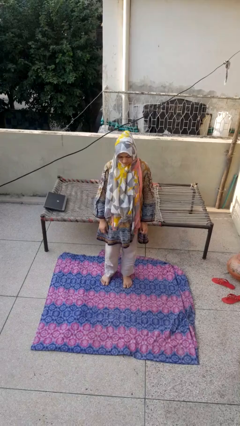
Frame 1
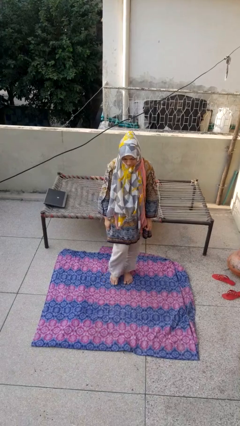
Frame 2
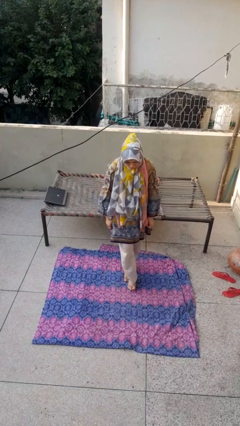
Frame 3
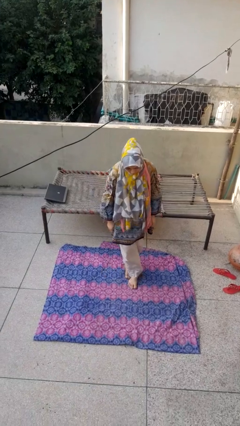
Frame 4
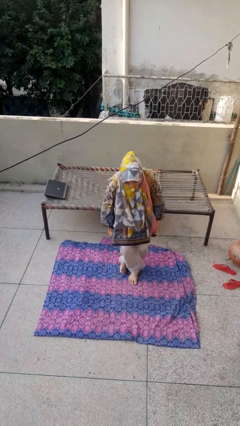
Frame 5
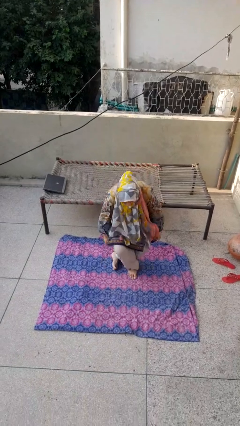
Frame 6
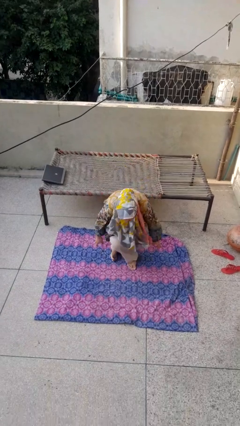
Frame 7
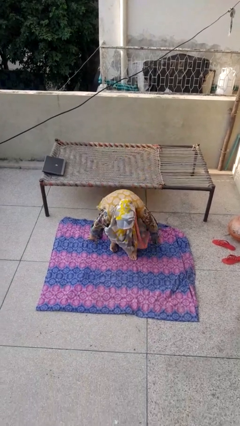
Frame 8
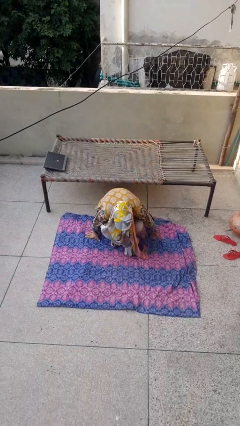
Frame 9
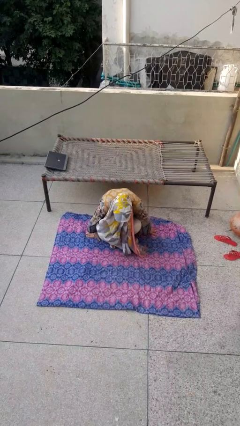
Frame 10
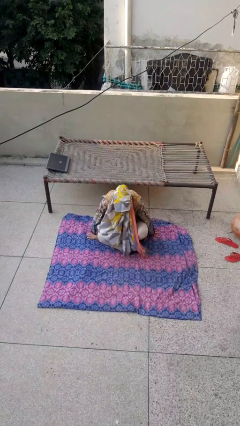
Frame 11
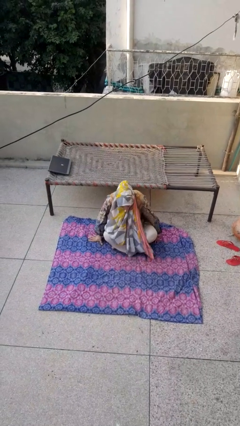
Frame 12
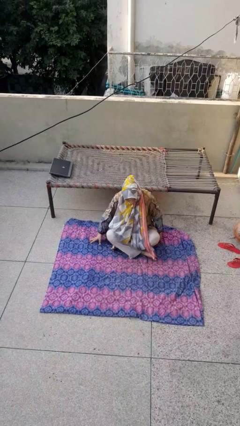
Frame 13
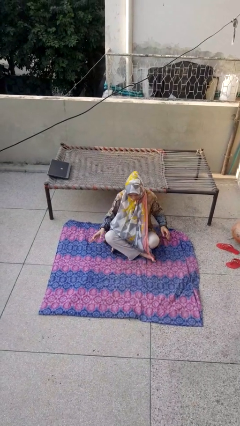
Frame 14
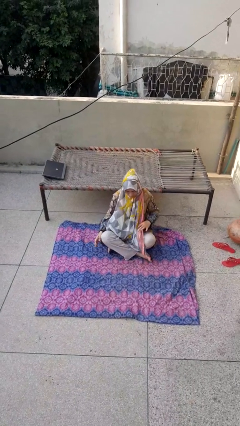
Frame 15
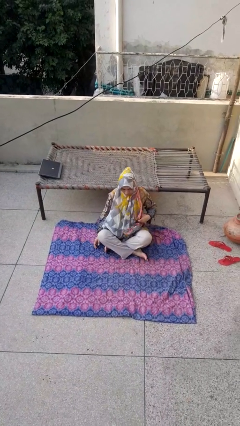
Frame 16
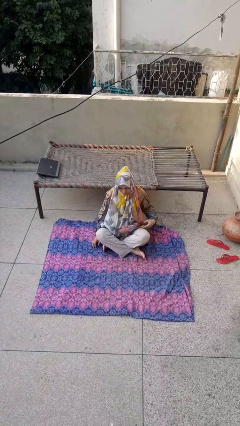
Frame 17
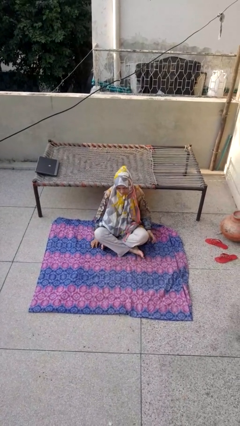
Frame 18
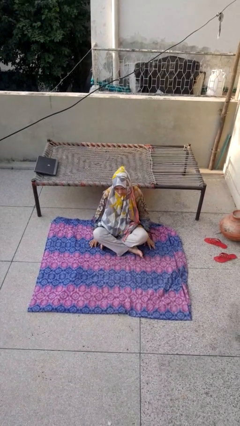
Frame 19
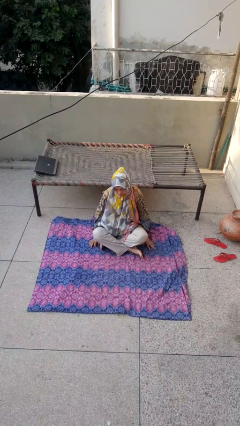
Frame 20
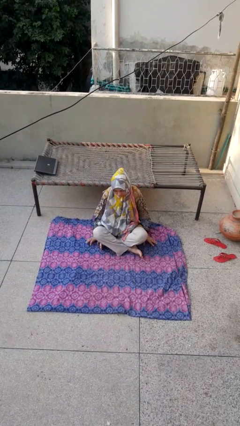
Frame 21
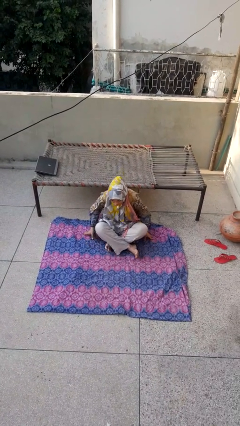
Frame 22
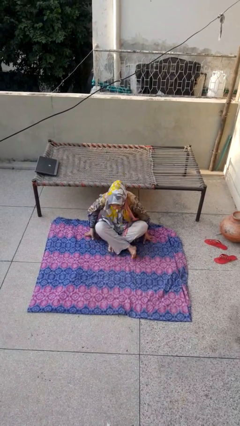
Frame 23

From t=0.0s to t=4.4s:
person sits crisscross

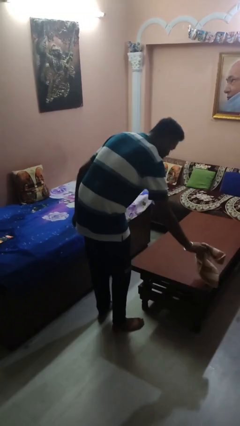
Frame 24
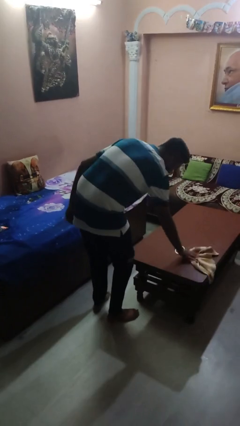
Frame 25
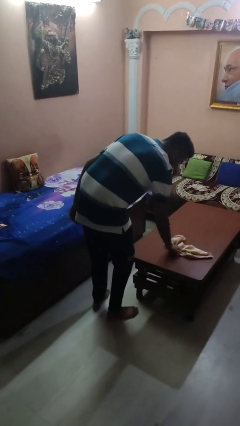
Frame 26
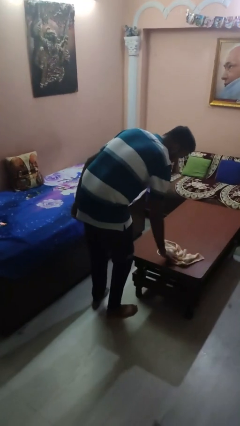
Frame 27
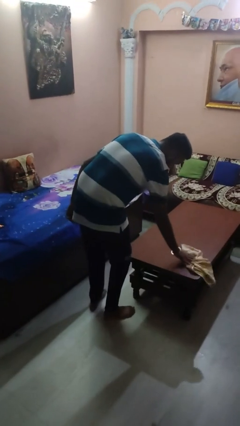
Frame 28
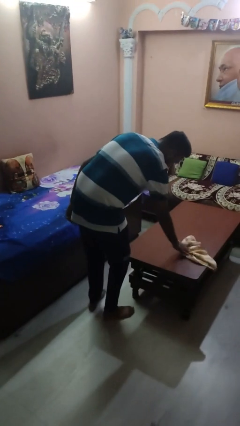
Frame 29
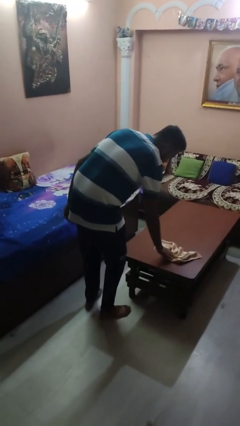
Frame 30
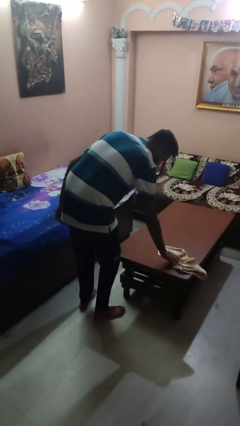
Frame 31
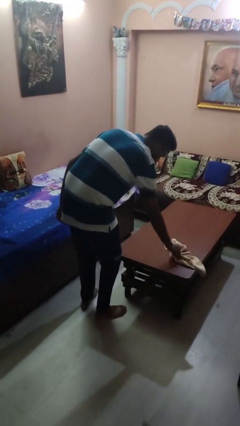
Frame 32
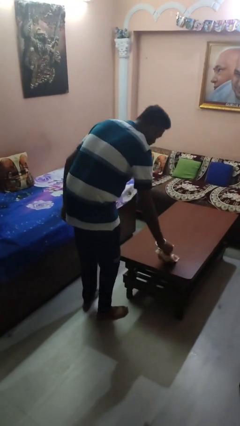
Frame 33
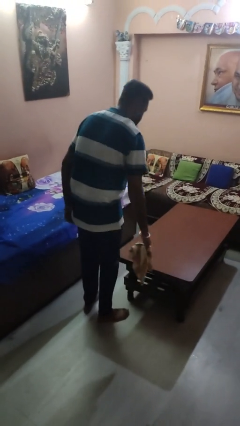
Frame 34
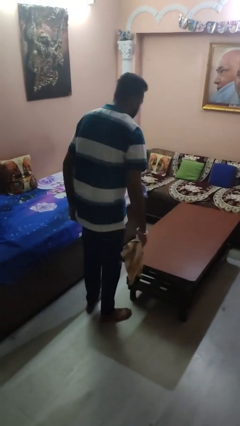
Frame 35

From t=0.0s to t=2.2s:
person cleans table with rag

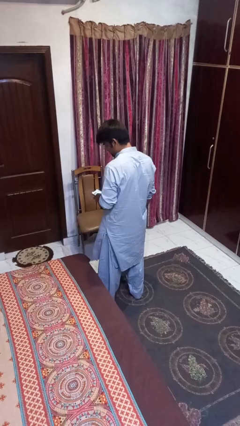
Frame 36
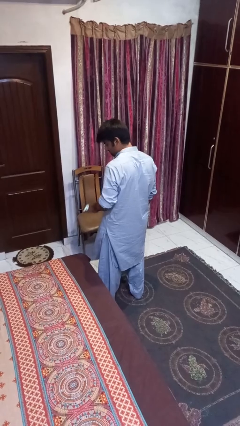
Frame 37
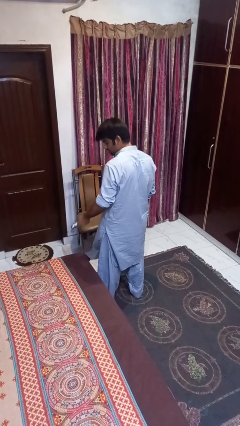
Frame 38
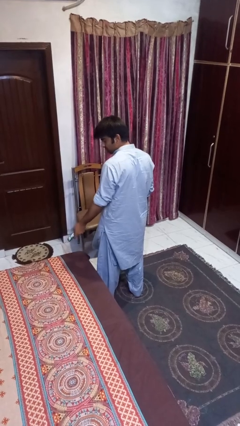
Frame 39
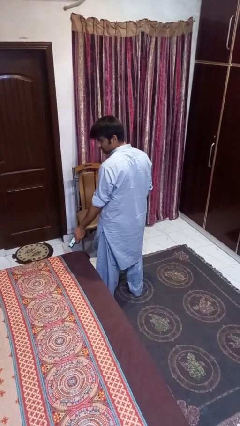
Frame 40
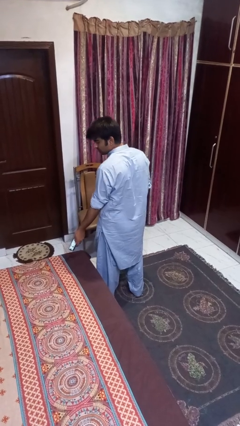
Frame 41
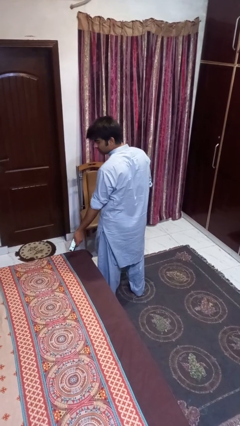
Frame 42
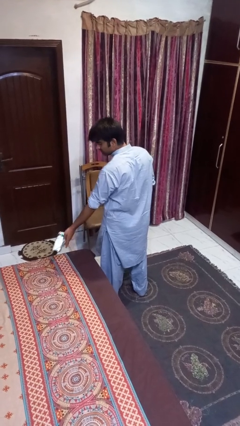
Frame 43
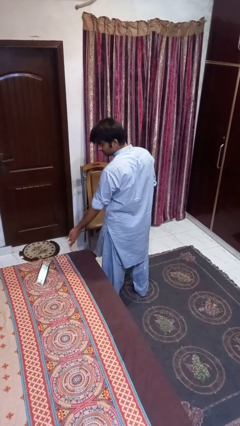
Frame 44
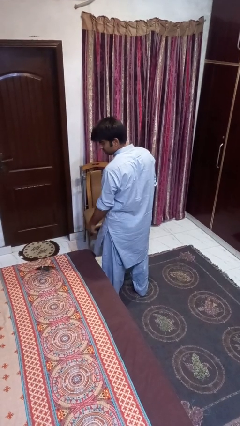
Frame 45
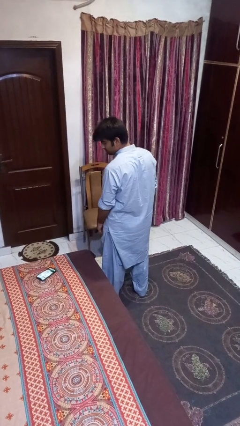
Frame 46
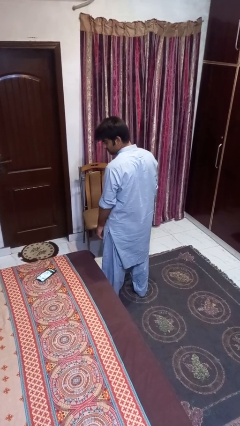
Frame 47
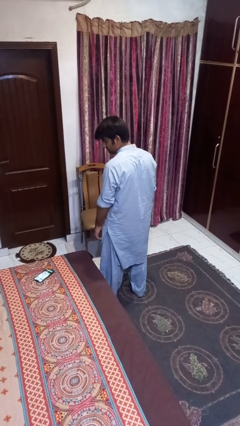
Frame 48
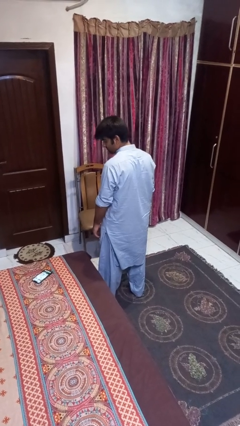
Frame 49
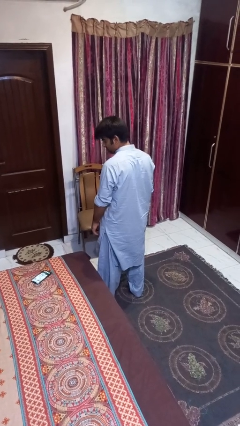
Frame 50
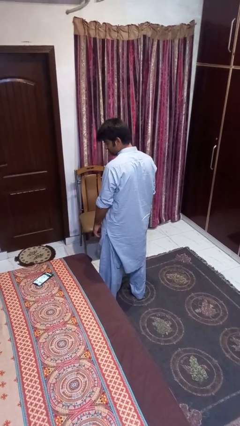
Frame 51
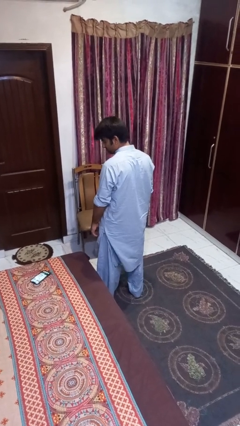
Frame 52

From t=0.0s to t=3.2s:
person throws object on bed

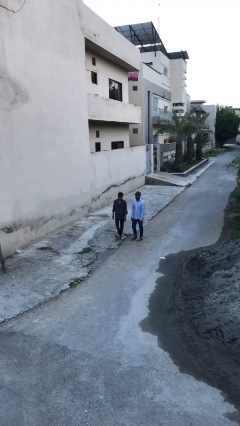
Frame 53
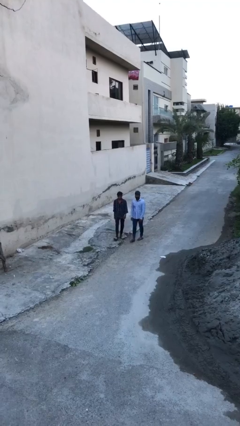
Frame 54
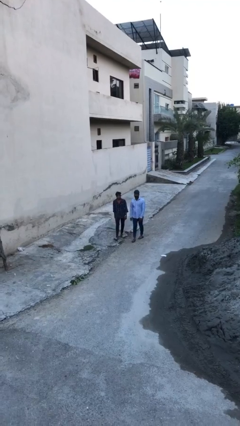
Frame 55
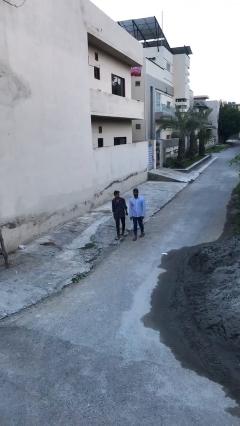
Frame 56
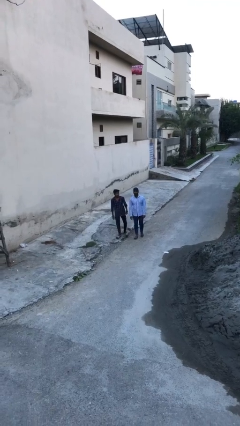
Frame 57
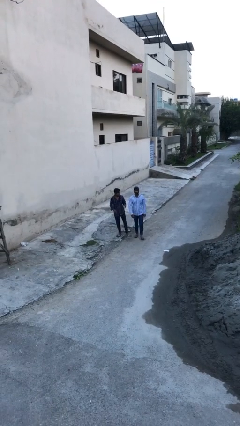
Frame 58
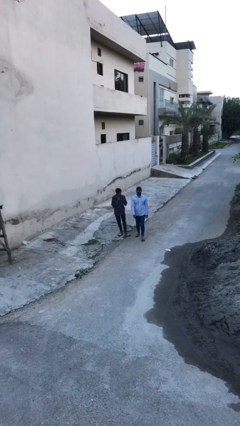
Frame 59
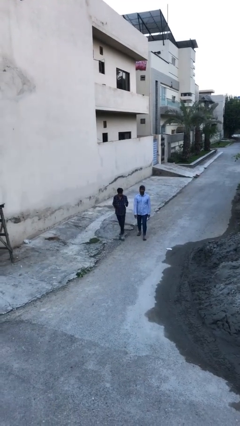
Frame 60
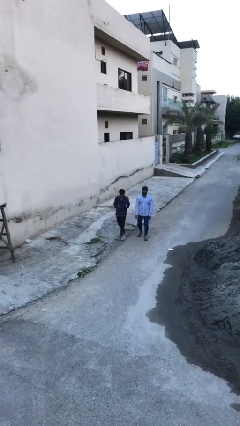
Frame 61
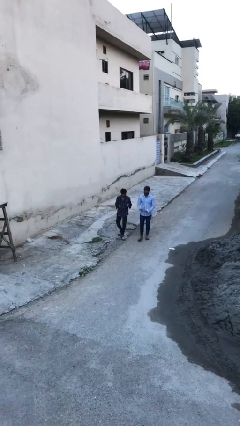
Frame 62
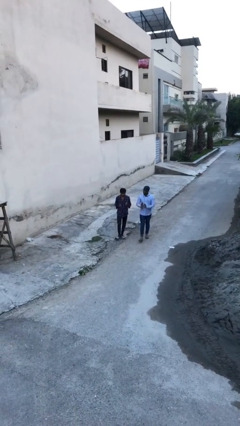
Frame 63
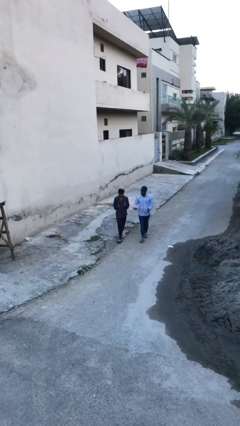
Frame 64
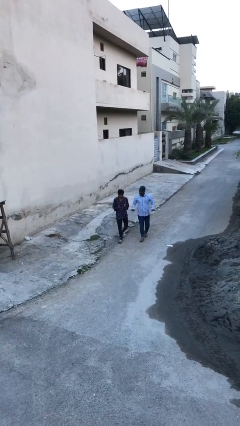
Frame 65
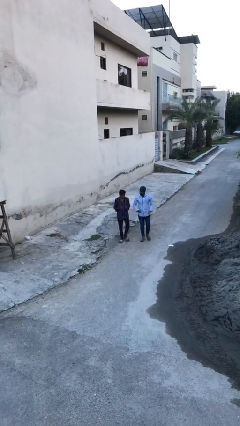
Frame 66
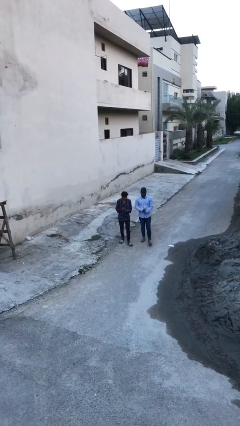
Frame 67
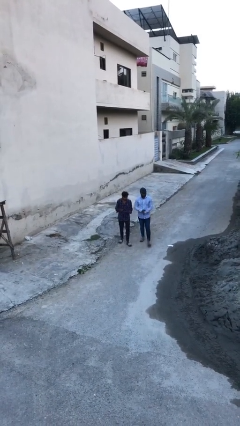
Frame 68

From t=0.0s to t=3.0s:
person talks to person

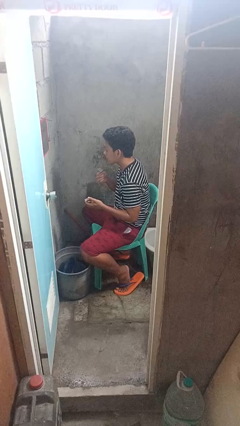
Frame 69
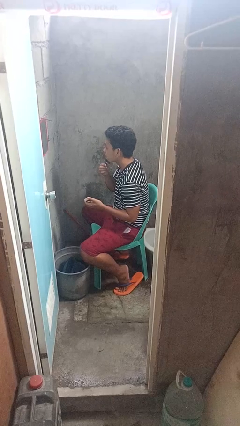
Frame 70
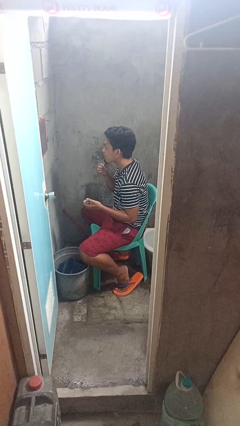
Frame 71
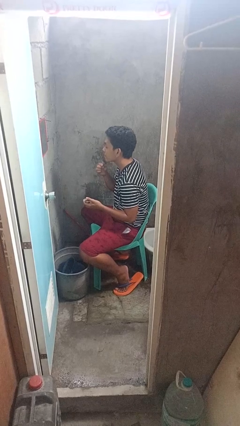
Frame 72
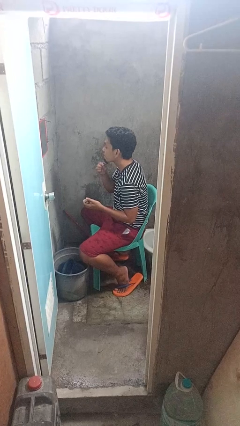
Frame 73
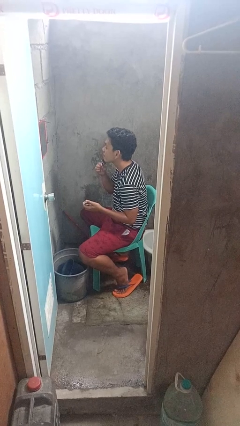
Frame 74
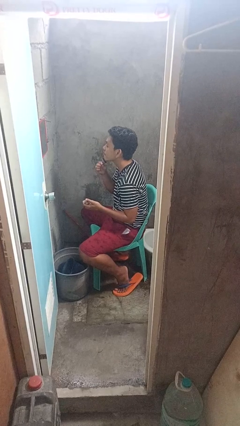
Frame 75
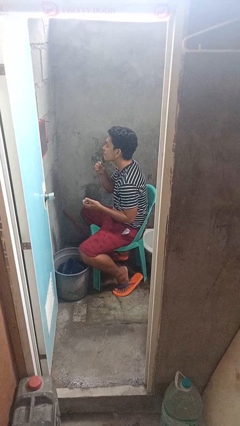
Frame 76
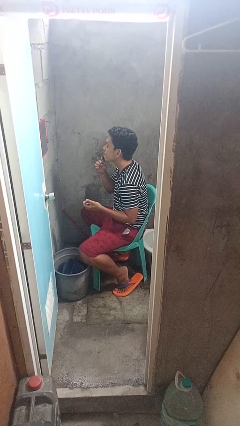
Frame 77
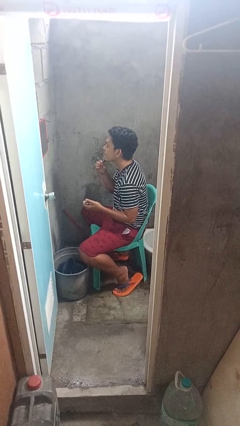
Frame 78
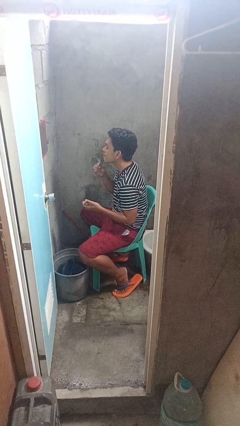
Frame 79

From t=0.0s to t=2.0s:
person shaves face

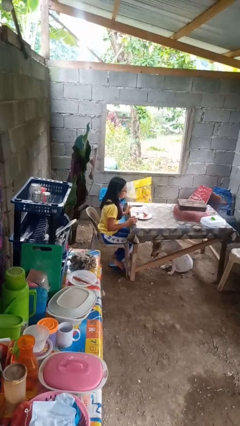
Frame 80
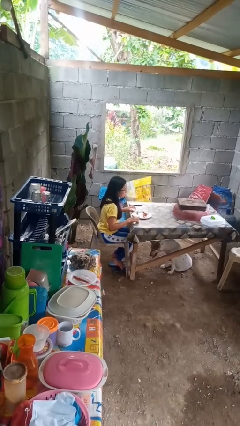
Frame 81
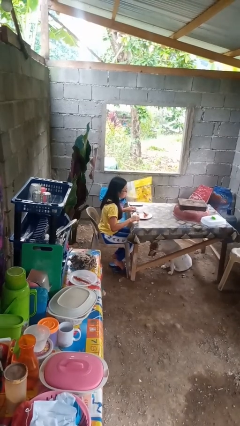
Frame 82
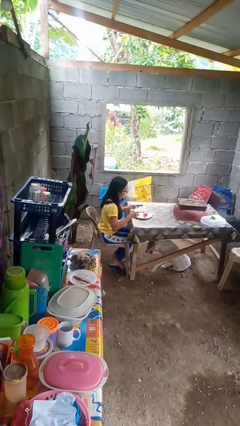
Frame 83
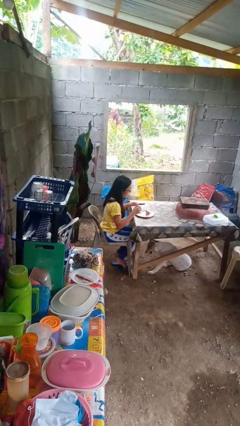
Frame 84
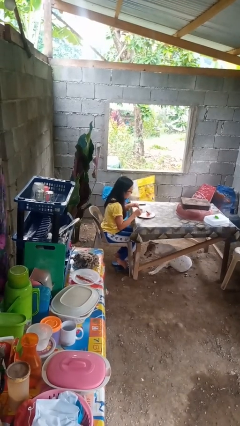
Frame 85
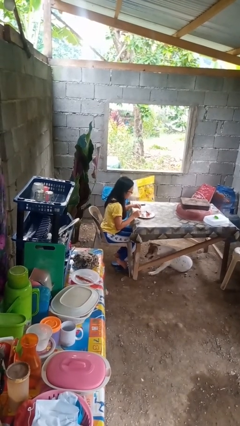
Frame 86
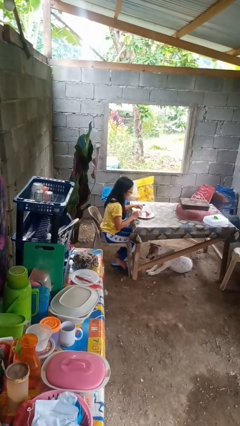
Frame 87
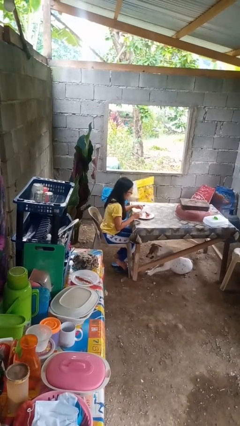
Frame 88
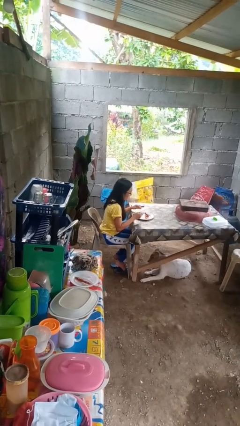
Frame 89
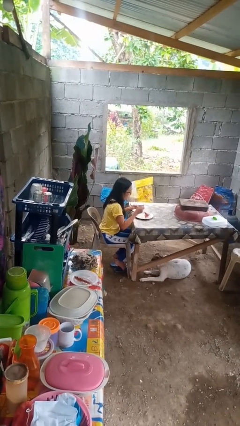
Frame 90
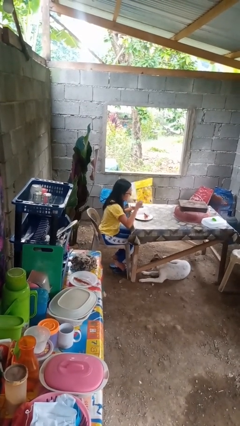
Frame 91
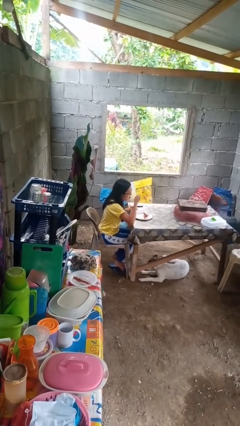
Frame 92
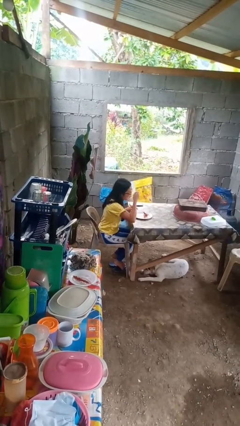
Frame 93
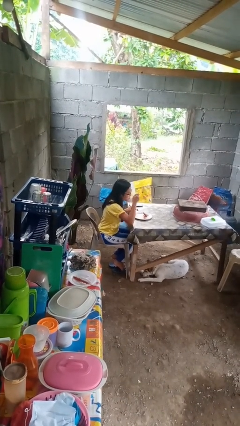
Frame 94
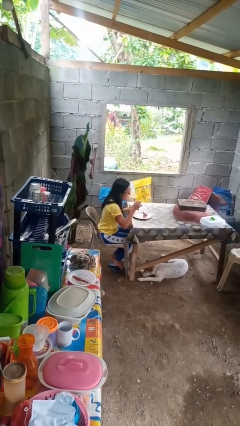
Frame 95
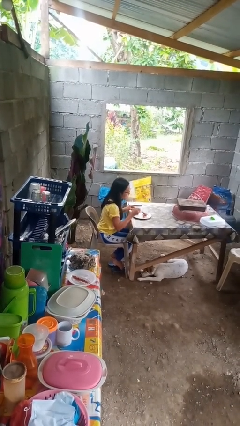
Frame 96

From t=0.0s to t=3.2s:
person eats with utensil
